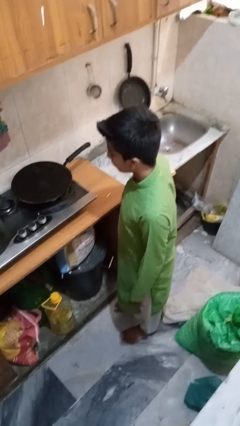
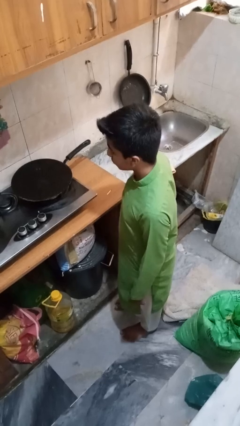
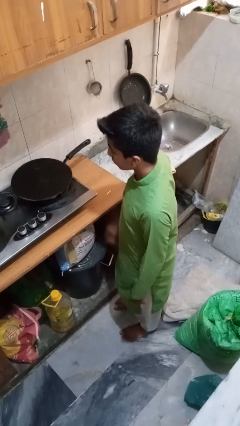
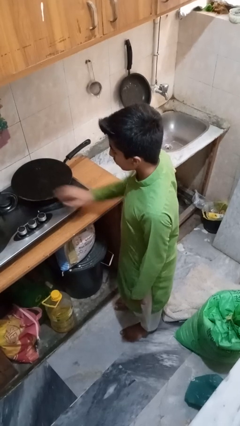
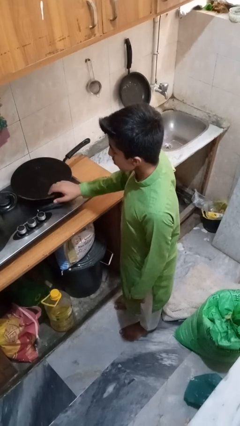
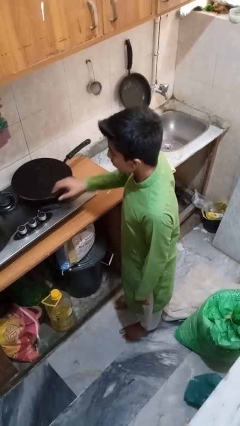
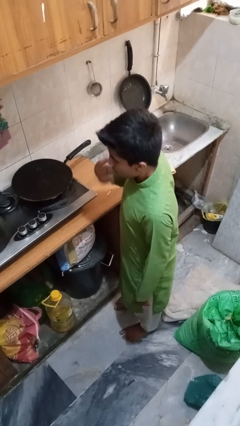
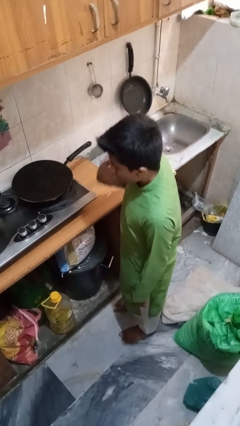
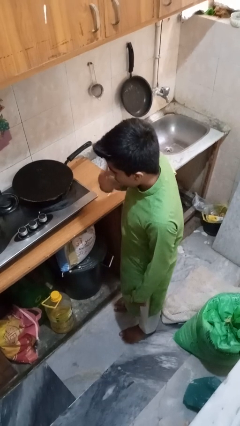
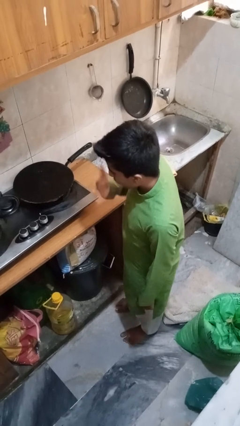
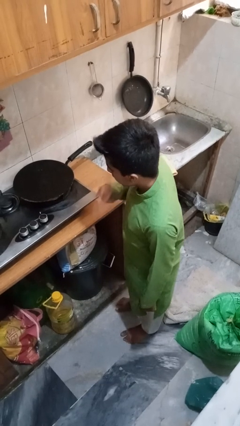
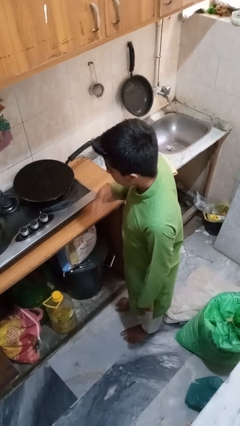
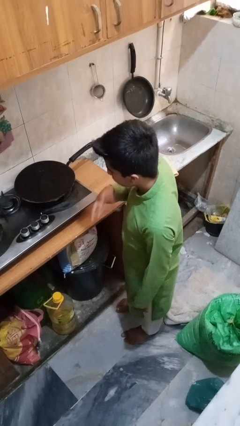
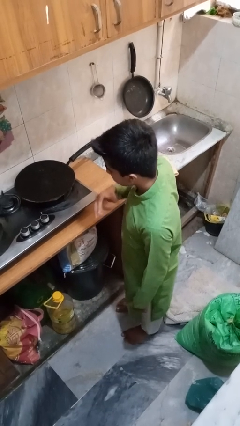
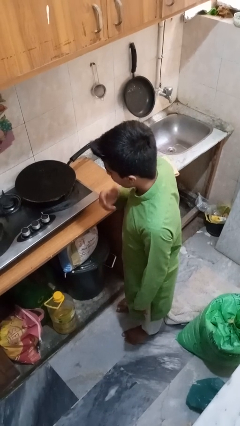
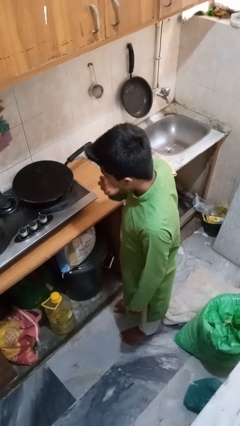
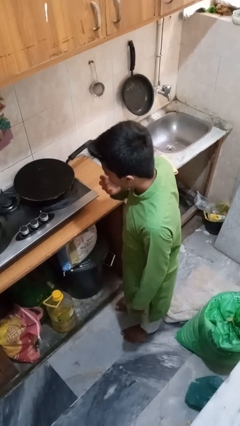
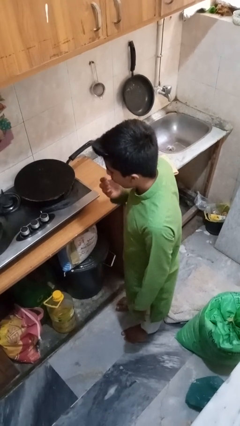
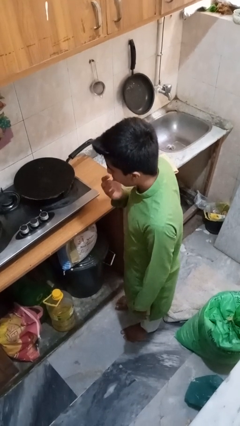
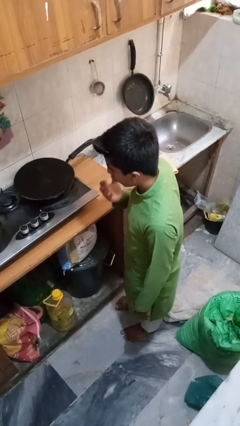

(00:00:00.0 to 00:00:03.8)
person burns hand

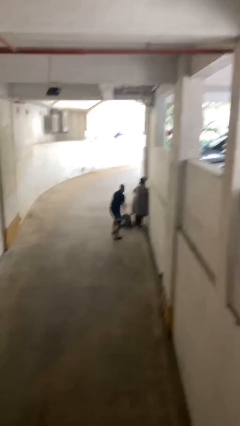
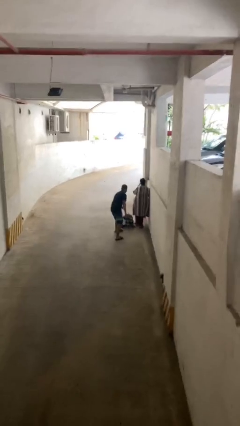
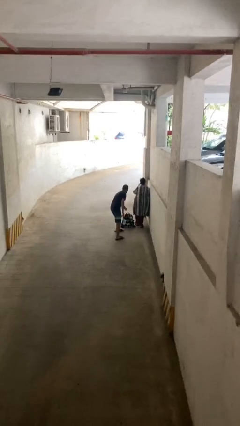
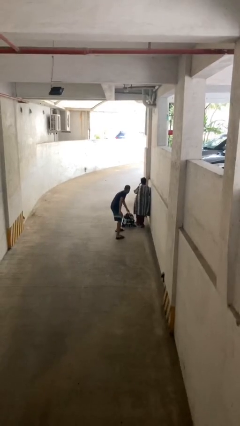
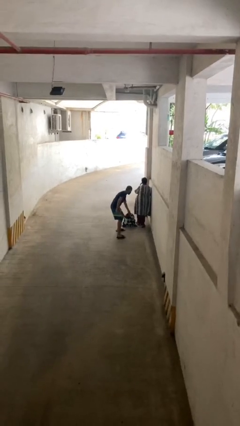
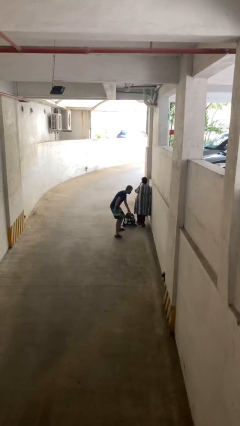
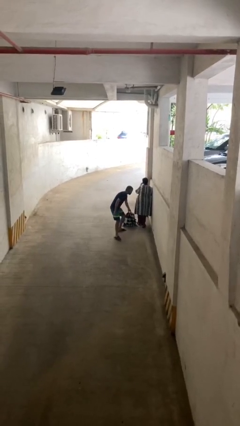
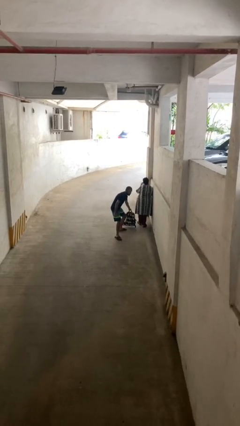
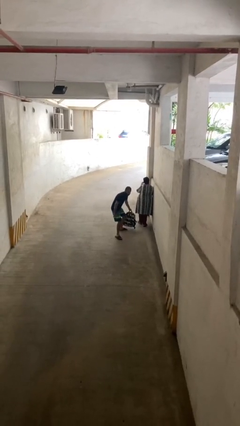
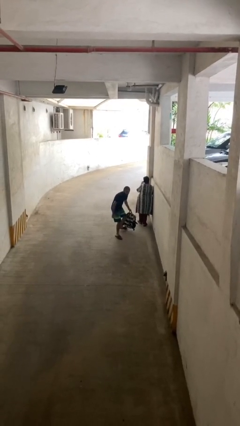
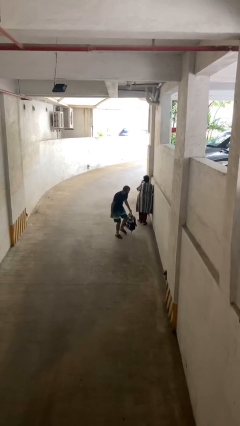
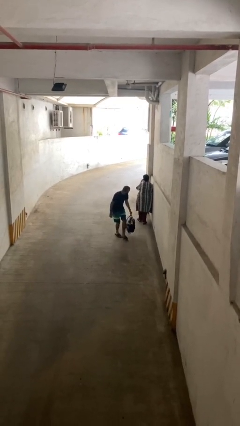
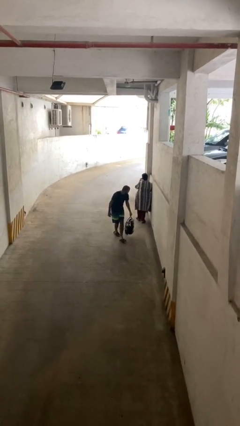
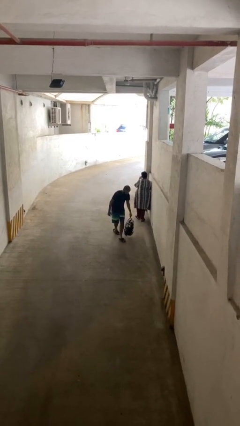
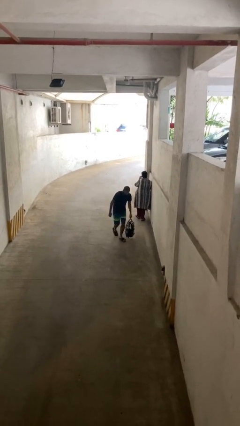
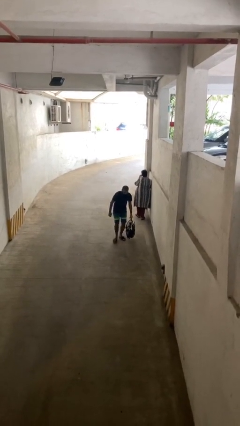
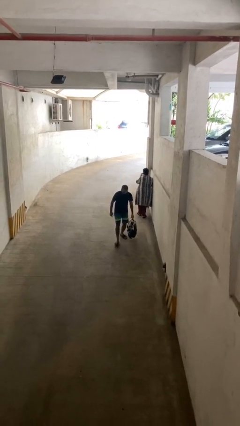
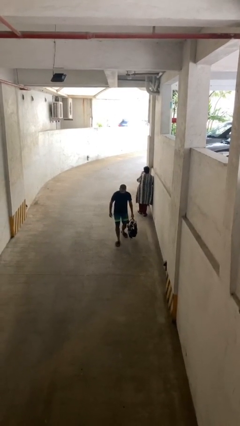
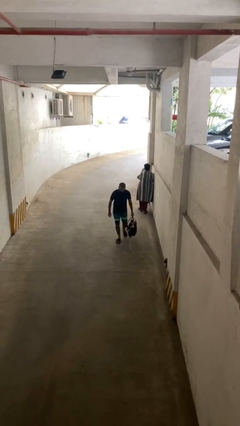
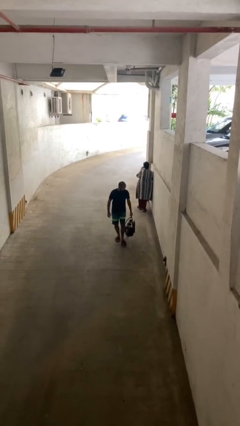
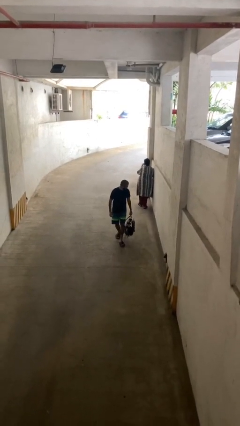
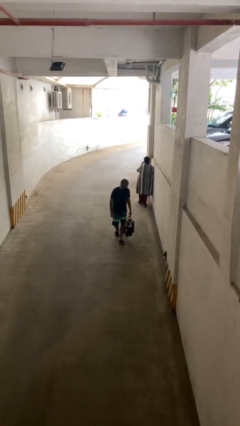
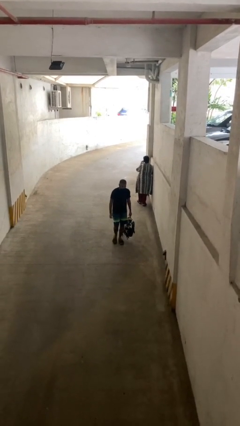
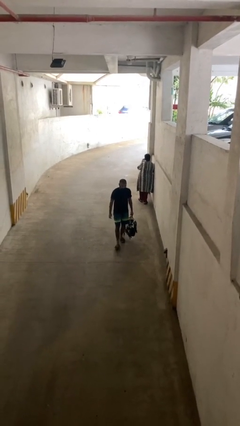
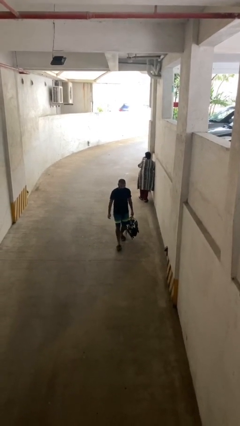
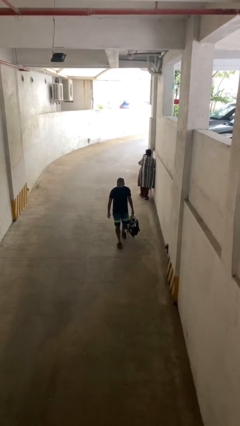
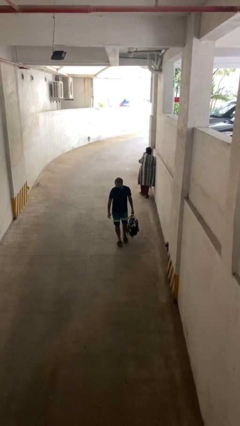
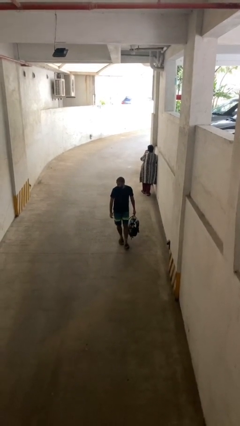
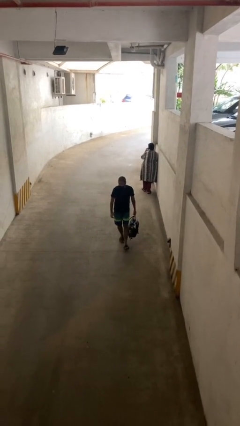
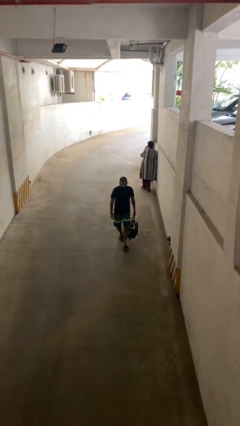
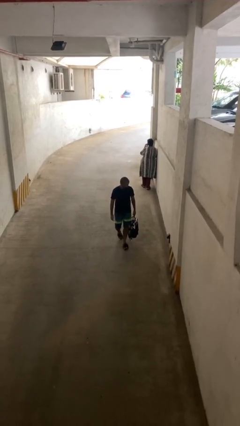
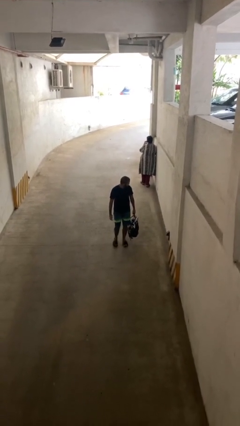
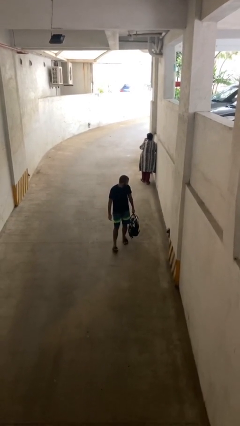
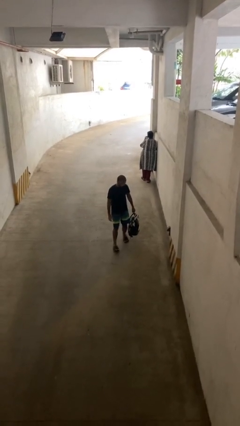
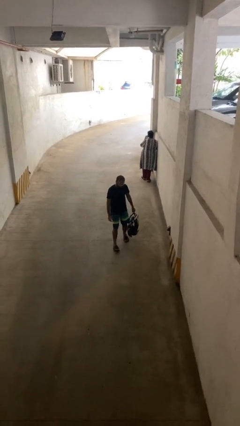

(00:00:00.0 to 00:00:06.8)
person steals object from person

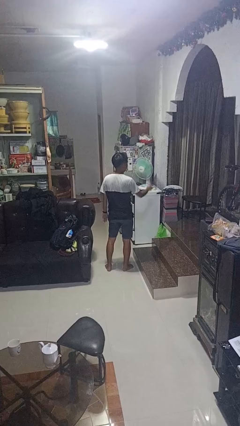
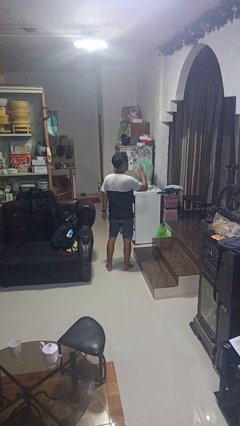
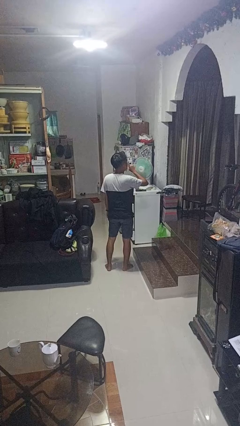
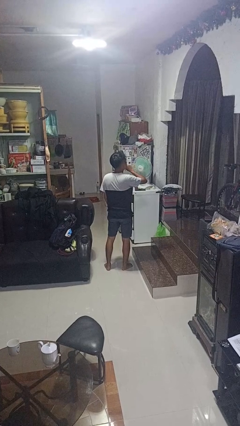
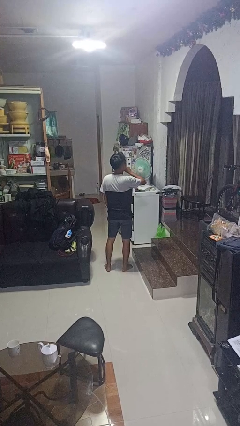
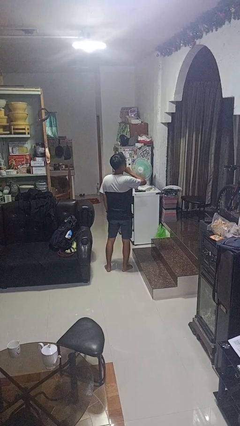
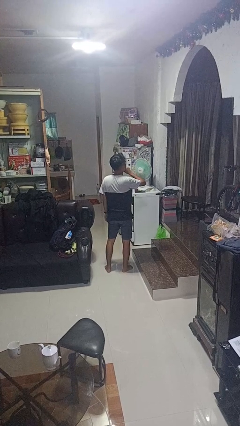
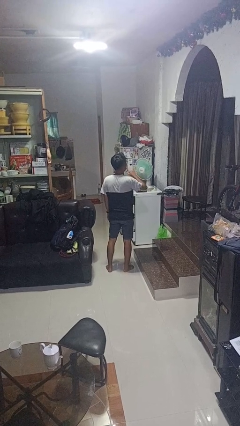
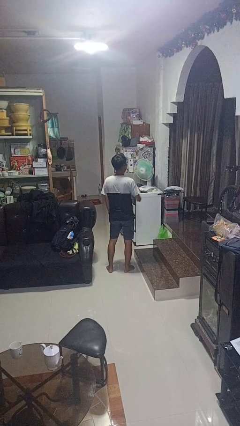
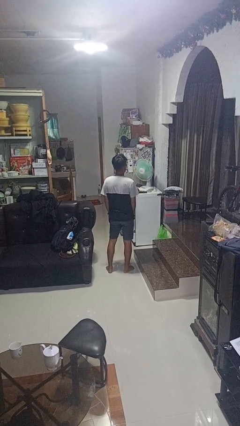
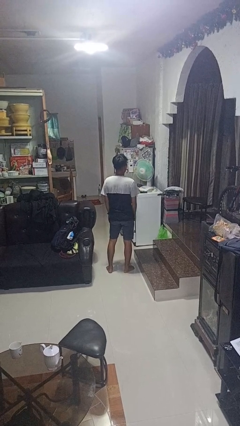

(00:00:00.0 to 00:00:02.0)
person gestures be quiet

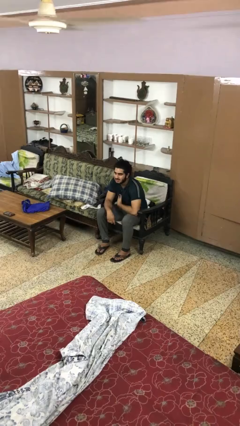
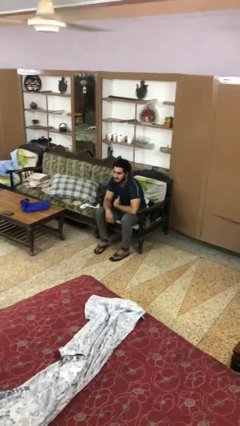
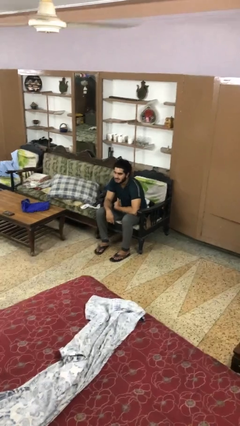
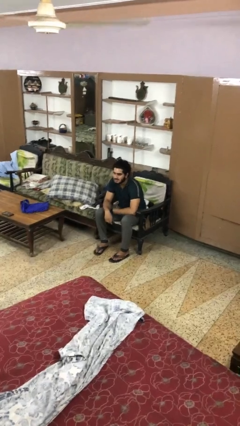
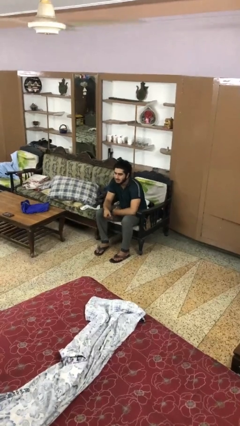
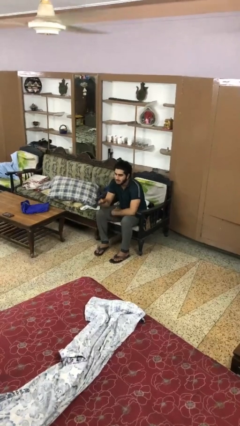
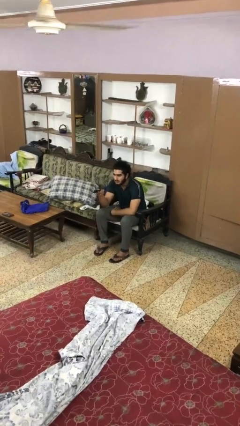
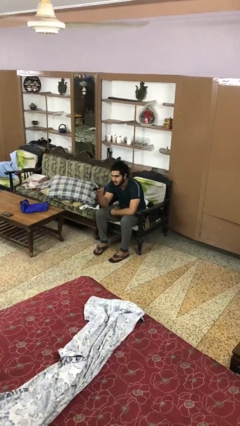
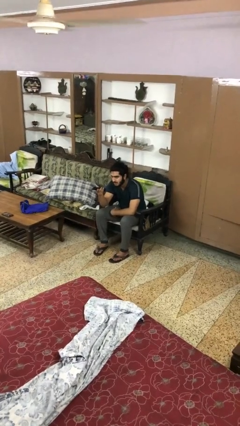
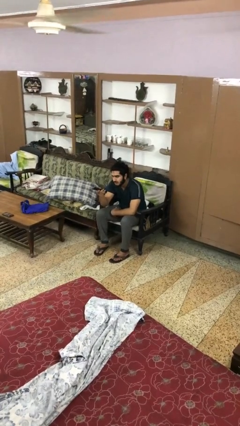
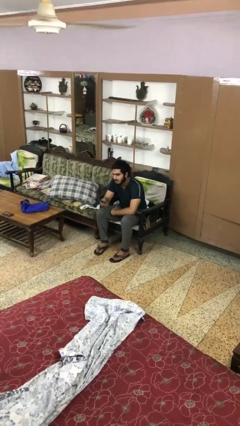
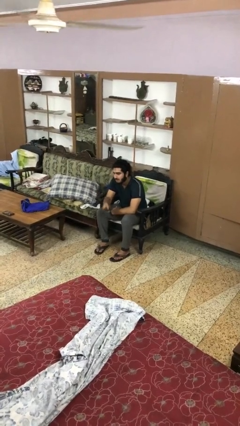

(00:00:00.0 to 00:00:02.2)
person uses television remote

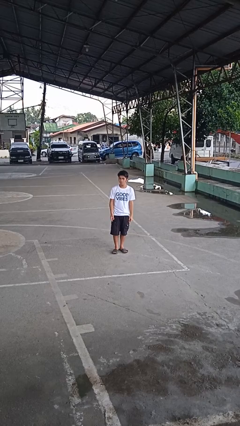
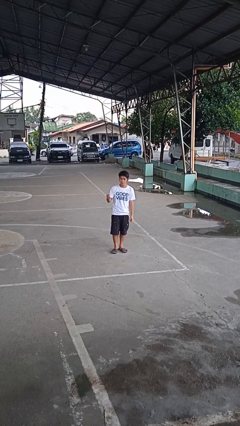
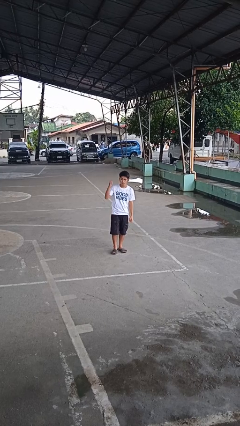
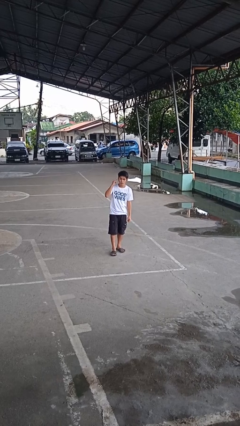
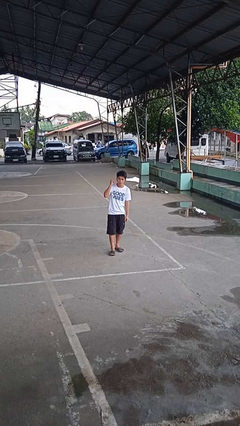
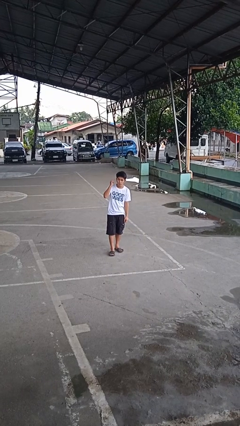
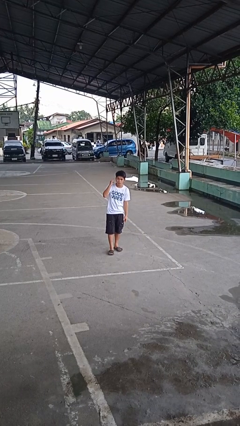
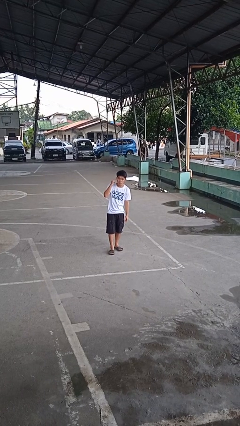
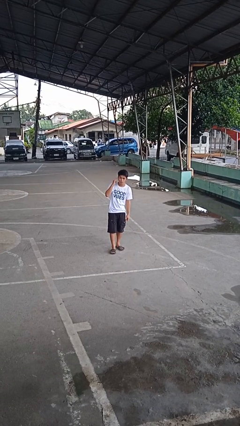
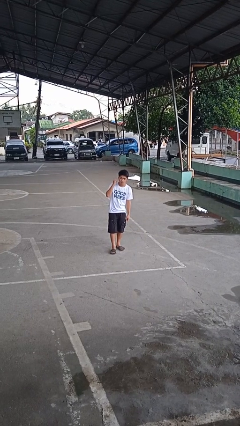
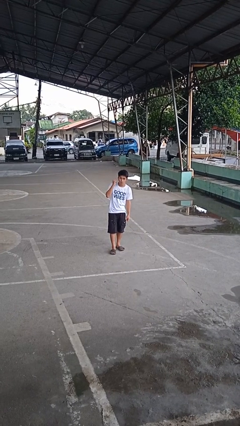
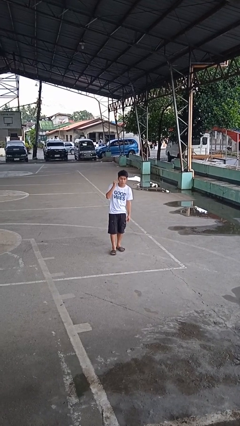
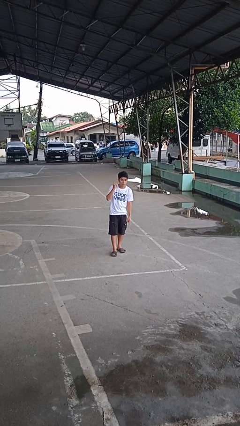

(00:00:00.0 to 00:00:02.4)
person gestures listen closely
